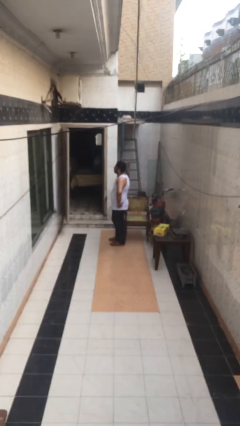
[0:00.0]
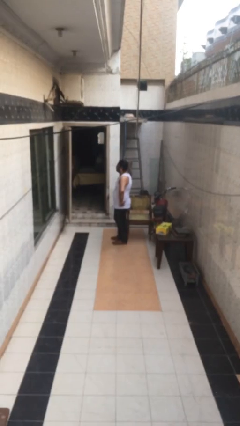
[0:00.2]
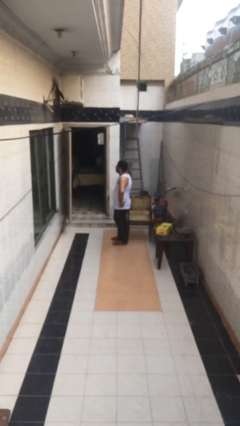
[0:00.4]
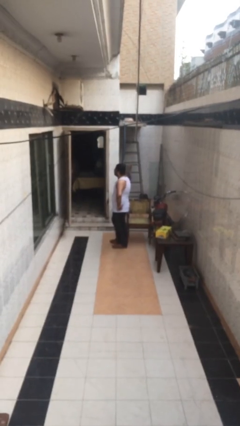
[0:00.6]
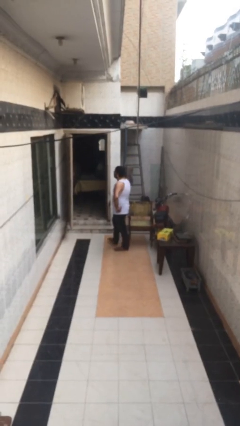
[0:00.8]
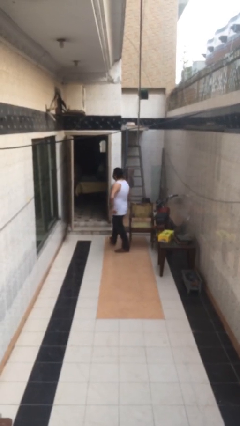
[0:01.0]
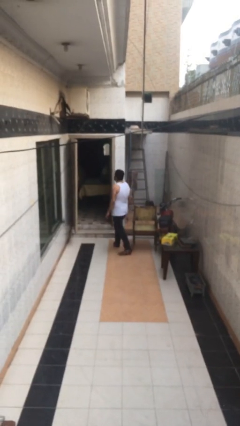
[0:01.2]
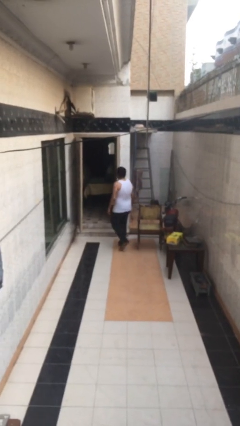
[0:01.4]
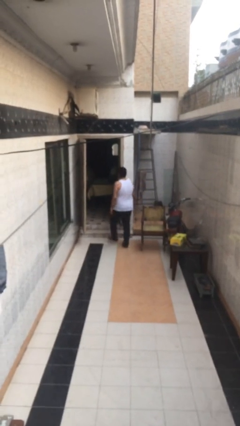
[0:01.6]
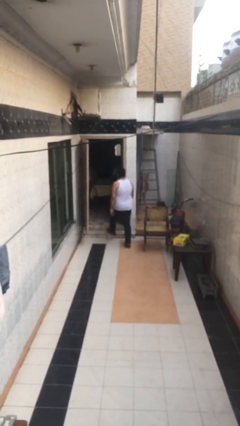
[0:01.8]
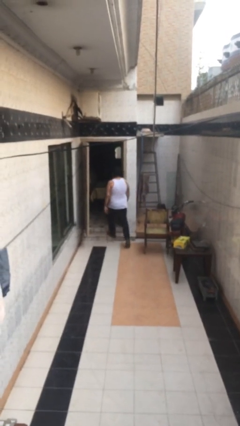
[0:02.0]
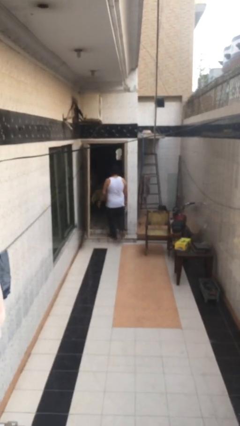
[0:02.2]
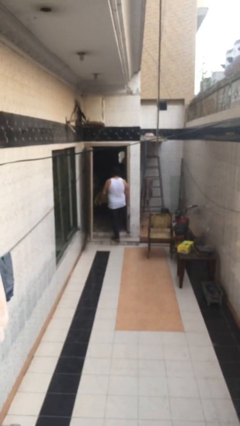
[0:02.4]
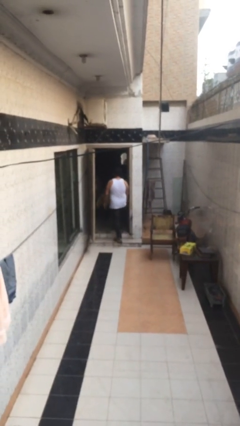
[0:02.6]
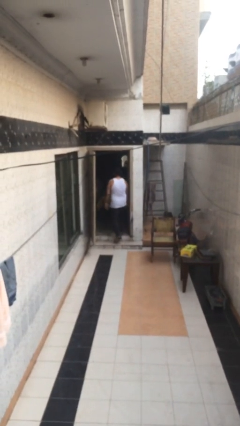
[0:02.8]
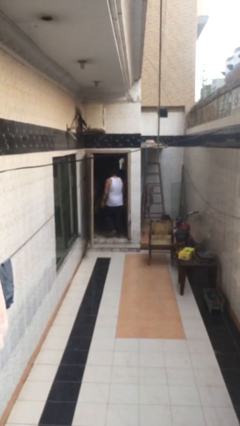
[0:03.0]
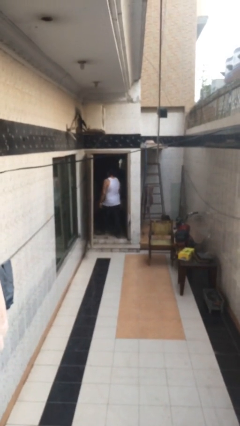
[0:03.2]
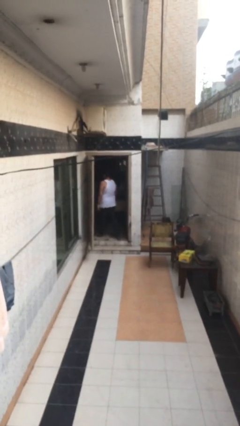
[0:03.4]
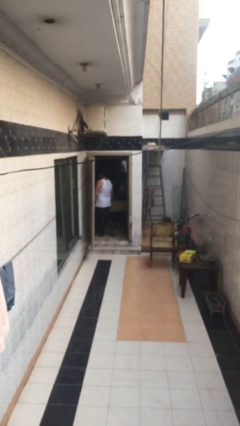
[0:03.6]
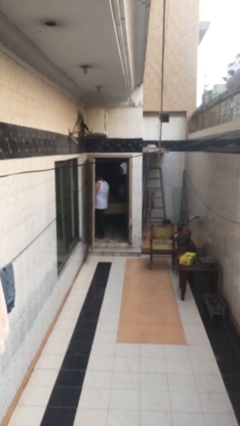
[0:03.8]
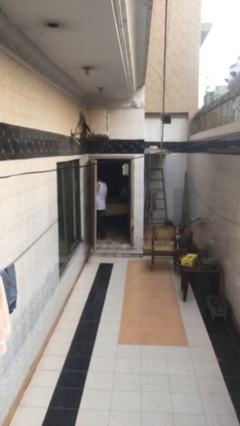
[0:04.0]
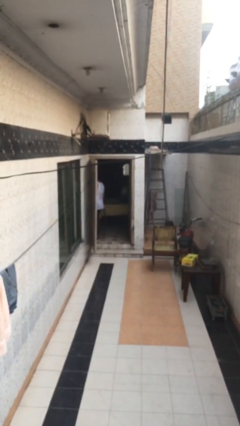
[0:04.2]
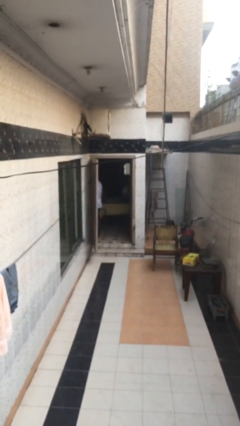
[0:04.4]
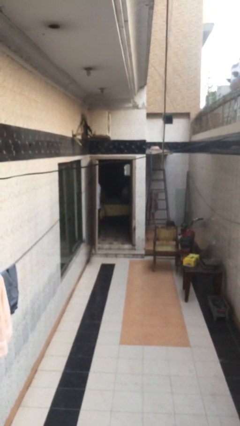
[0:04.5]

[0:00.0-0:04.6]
person exits scene through structure

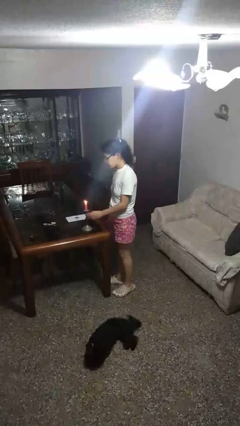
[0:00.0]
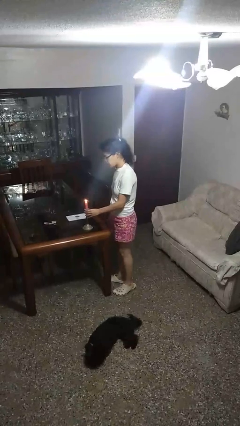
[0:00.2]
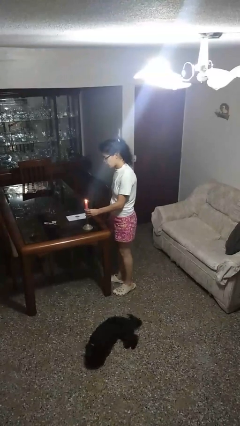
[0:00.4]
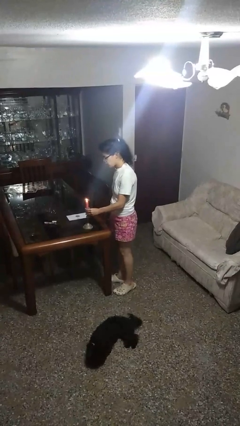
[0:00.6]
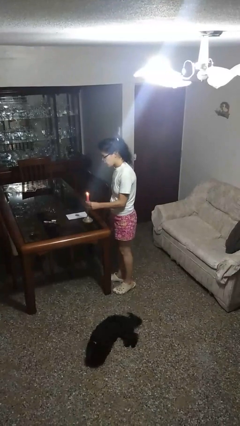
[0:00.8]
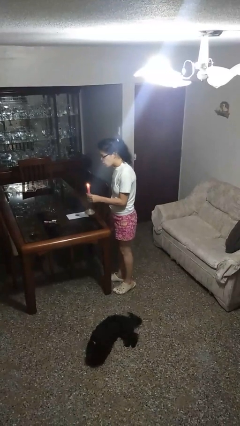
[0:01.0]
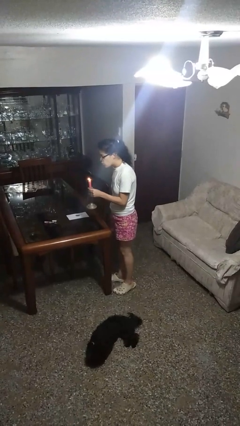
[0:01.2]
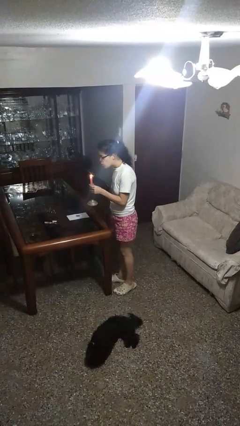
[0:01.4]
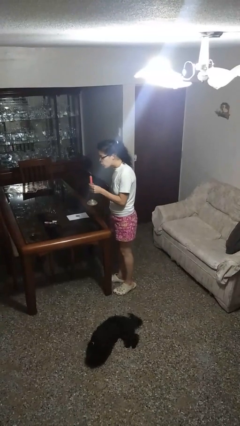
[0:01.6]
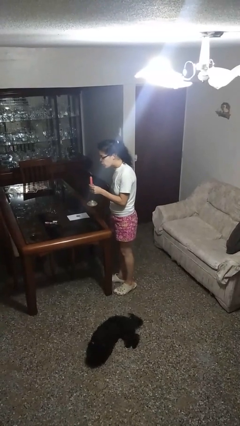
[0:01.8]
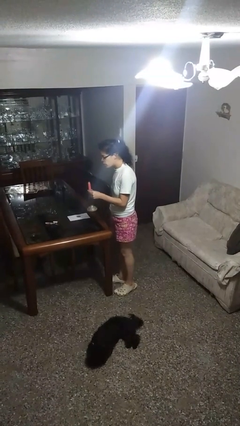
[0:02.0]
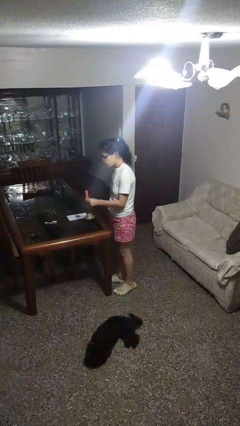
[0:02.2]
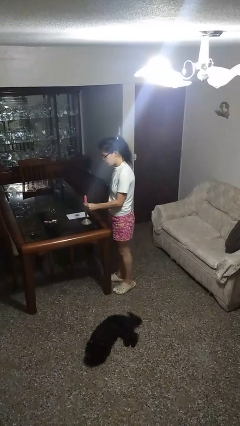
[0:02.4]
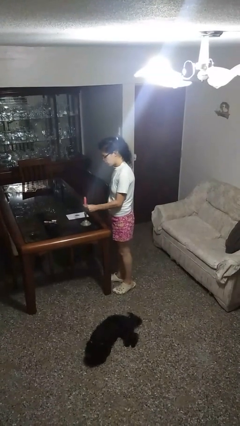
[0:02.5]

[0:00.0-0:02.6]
person extinguishes candle

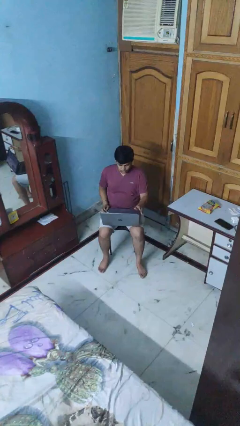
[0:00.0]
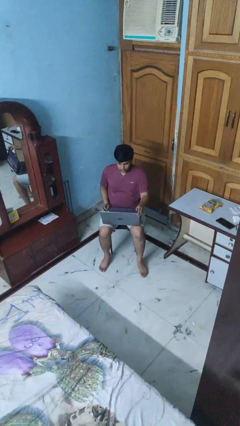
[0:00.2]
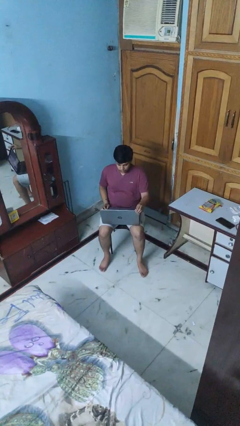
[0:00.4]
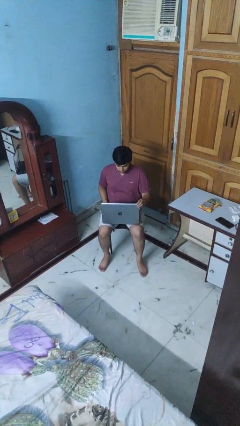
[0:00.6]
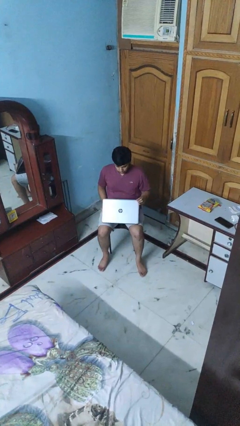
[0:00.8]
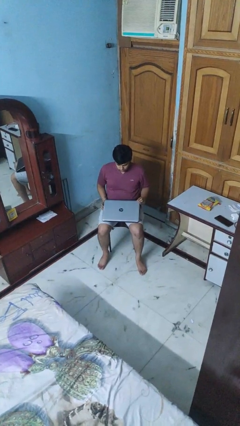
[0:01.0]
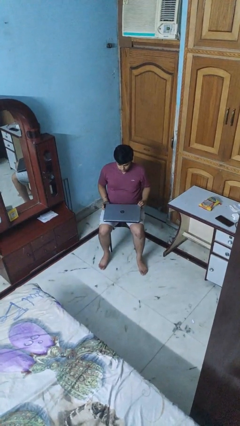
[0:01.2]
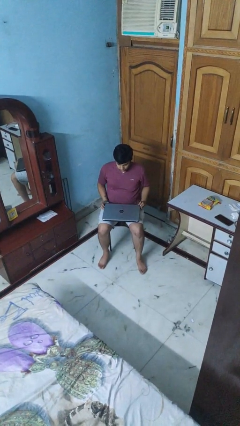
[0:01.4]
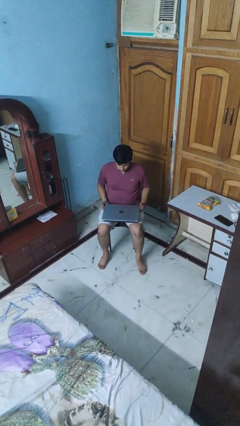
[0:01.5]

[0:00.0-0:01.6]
person closes laptop

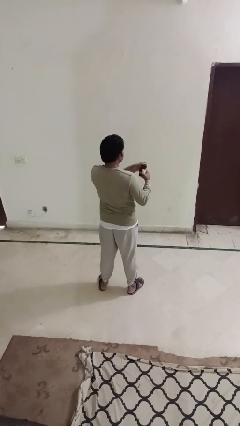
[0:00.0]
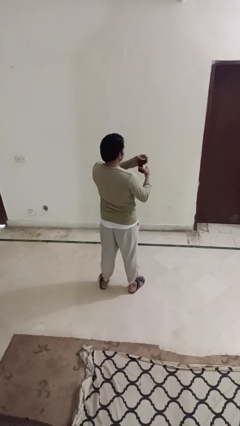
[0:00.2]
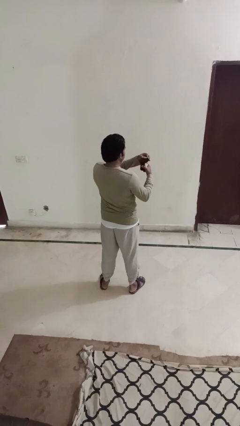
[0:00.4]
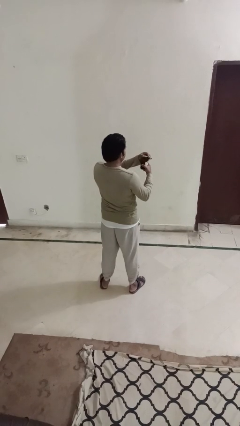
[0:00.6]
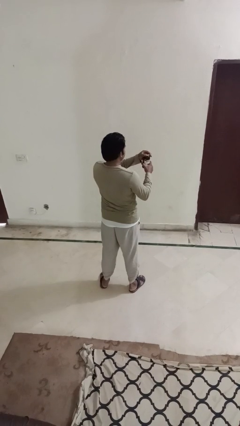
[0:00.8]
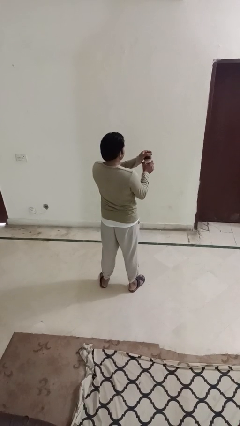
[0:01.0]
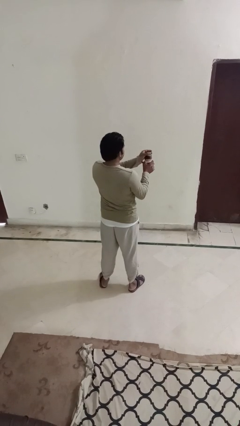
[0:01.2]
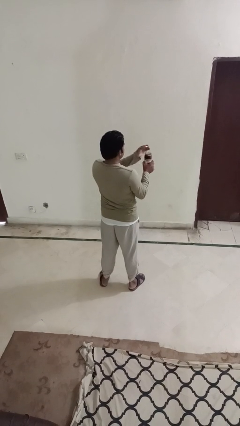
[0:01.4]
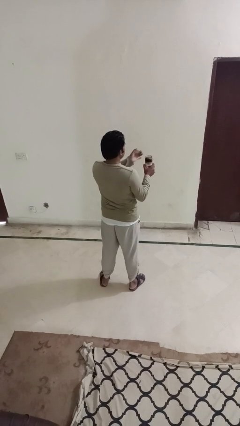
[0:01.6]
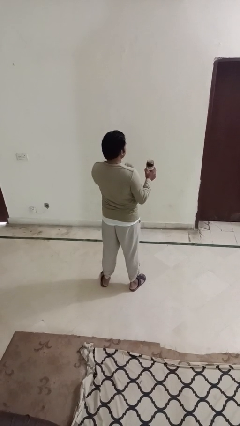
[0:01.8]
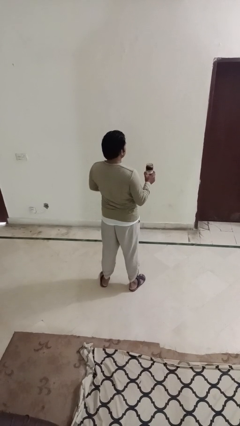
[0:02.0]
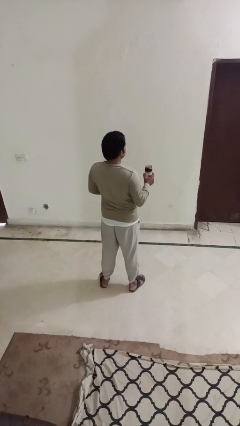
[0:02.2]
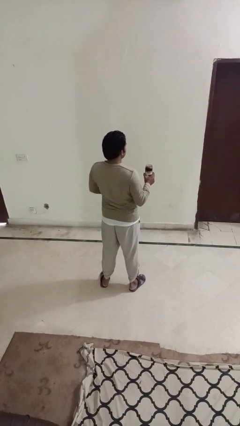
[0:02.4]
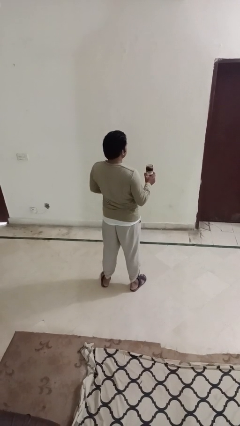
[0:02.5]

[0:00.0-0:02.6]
person opens jar

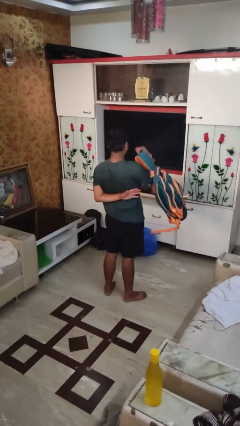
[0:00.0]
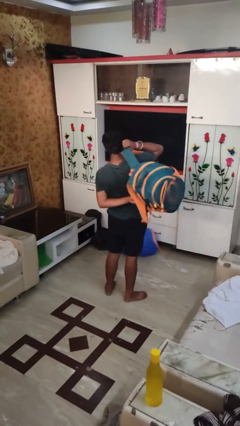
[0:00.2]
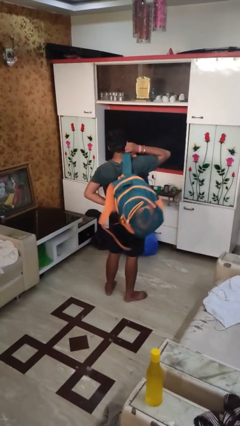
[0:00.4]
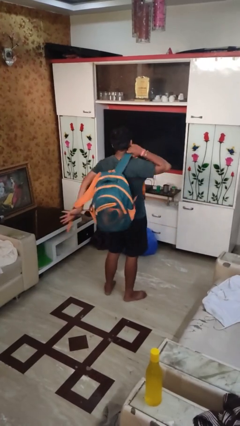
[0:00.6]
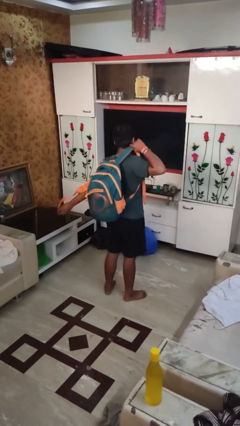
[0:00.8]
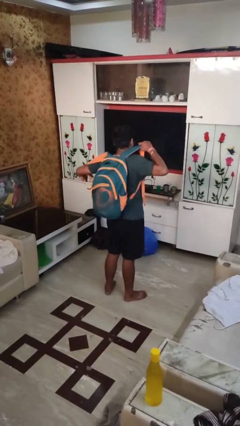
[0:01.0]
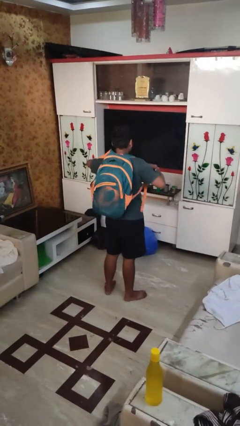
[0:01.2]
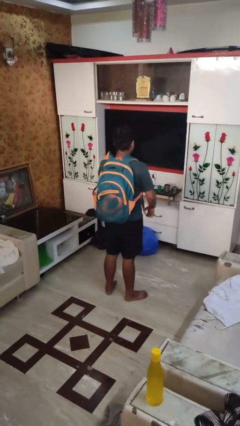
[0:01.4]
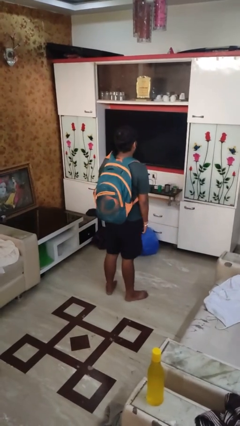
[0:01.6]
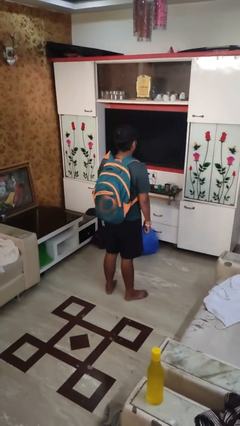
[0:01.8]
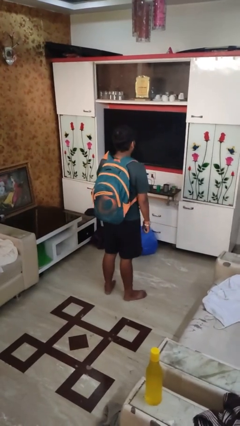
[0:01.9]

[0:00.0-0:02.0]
person puts on backpack

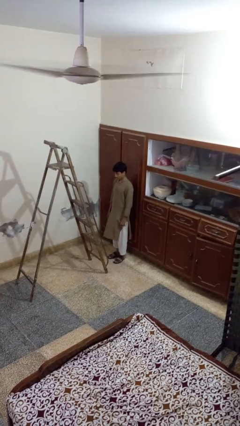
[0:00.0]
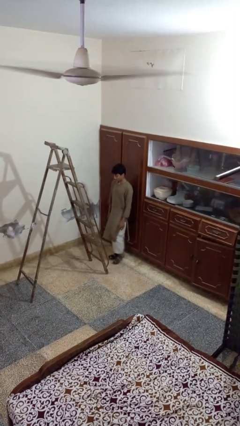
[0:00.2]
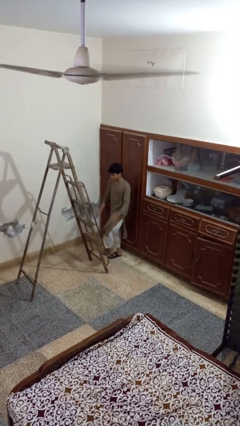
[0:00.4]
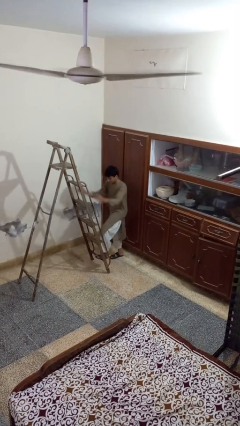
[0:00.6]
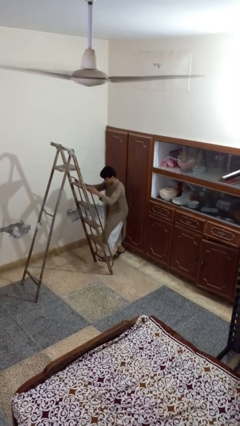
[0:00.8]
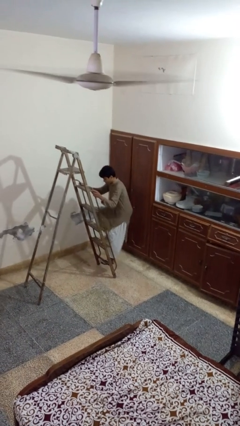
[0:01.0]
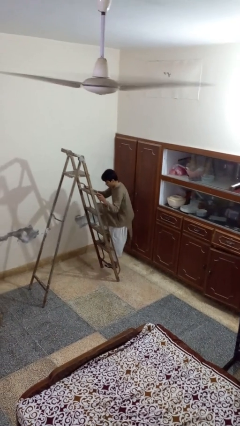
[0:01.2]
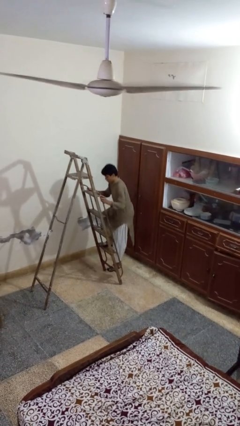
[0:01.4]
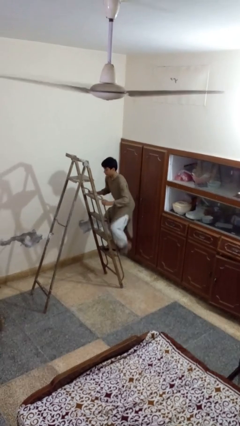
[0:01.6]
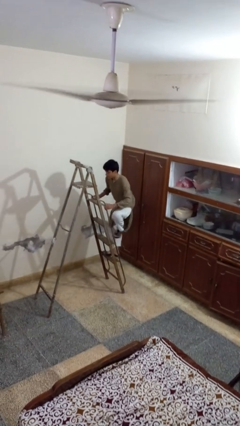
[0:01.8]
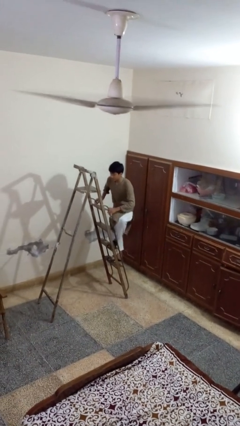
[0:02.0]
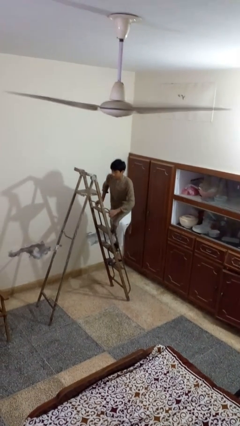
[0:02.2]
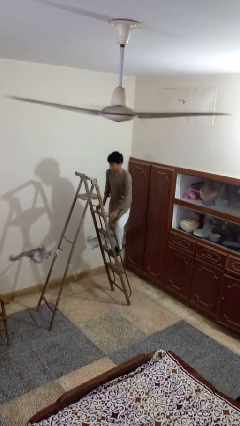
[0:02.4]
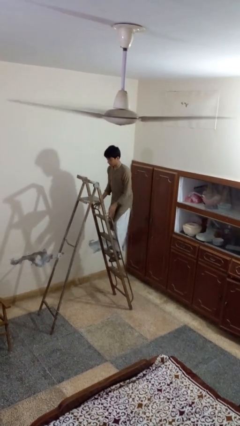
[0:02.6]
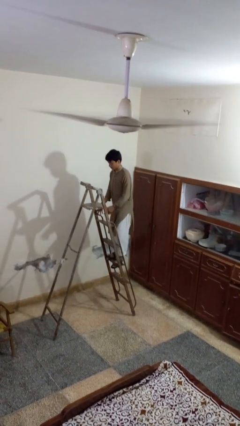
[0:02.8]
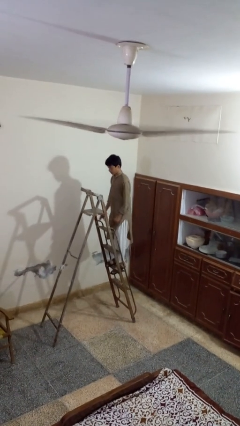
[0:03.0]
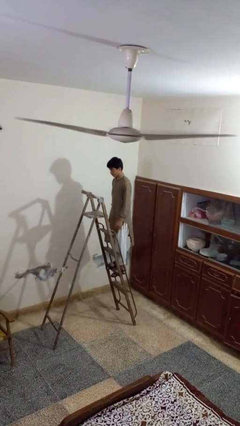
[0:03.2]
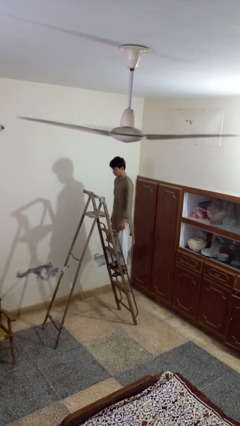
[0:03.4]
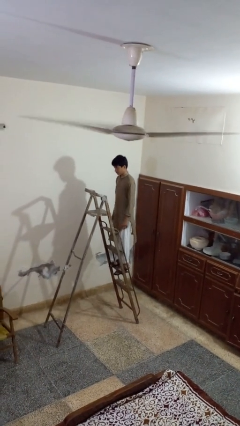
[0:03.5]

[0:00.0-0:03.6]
person climbs up ladder

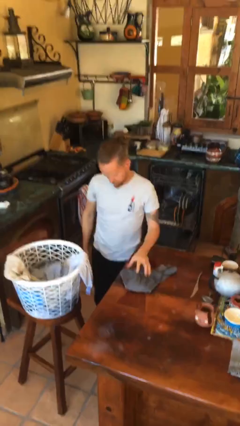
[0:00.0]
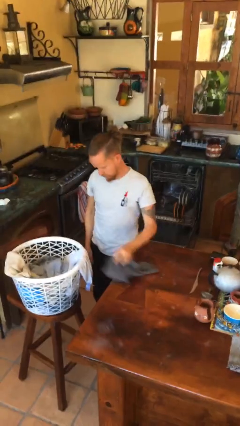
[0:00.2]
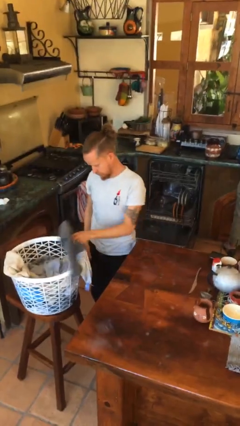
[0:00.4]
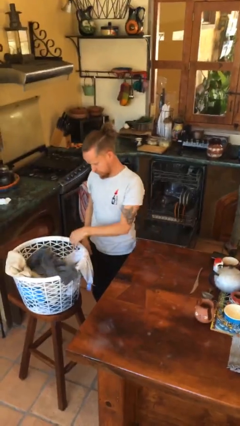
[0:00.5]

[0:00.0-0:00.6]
person folds pants
